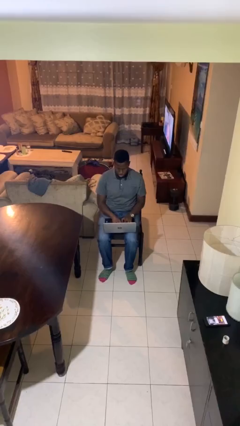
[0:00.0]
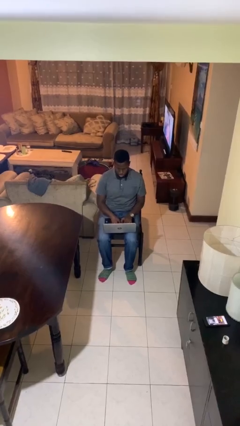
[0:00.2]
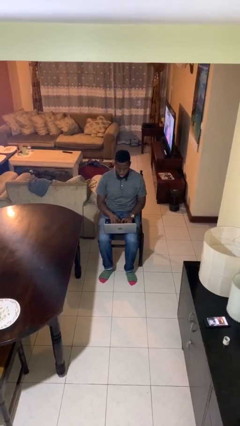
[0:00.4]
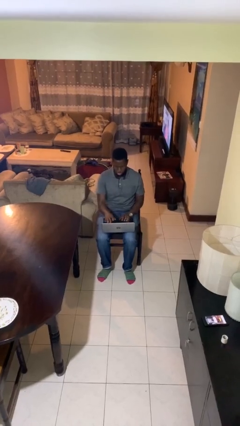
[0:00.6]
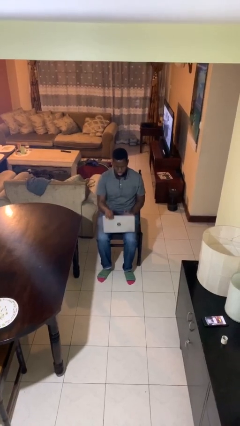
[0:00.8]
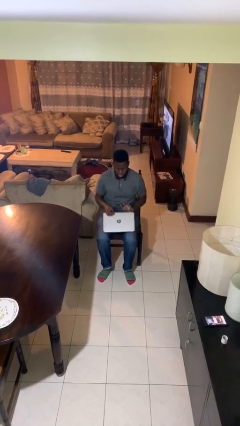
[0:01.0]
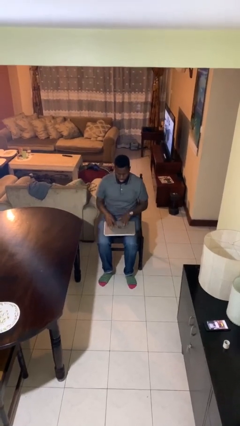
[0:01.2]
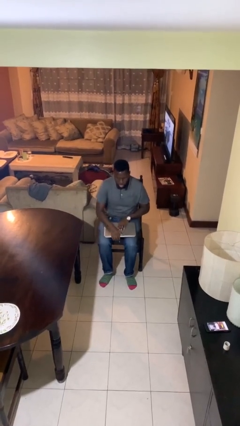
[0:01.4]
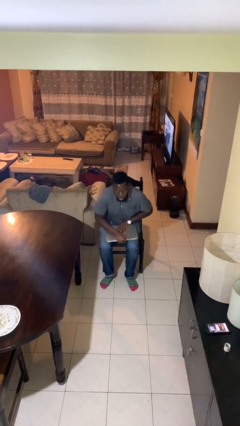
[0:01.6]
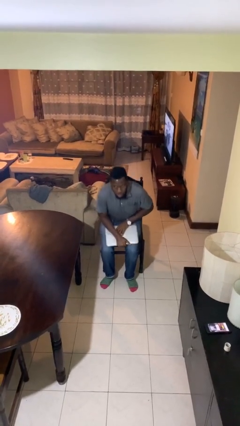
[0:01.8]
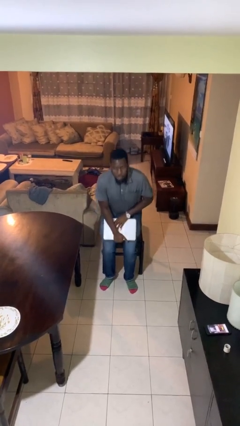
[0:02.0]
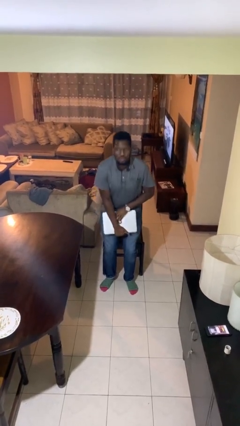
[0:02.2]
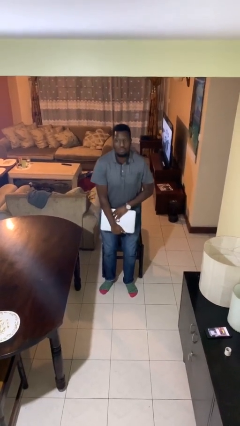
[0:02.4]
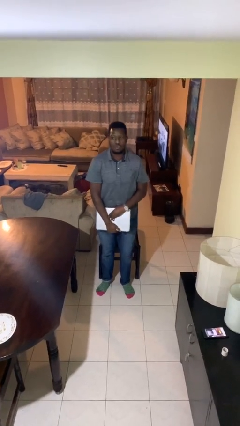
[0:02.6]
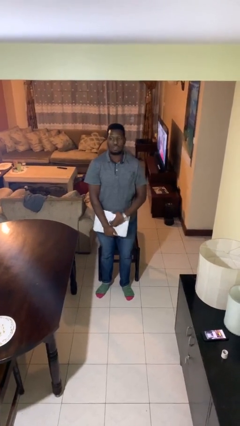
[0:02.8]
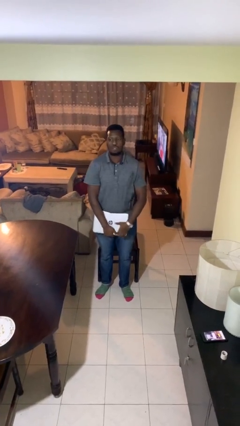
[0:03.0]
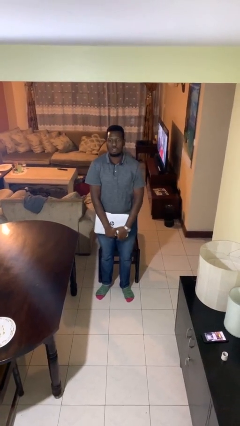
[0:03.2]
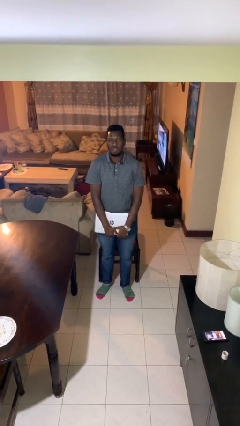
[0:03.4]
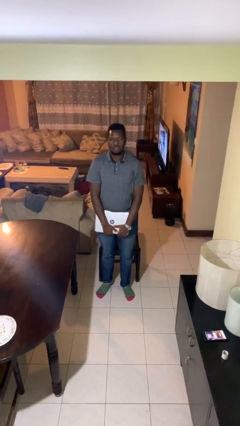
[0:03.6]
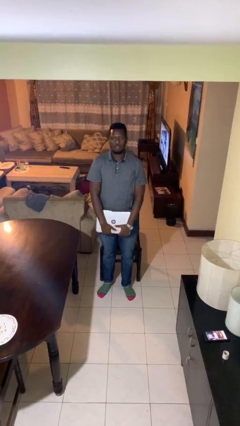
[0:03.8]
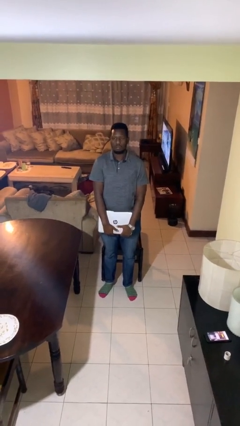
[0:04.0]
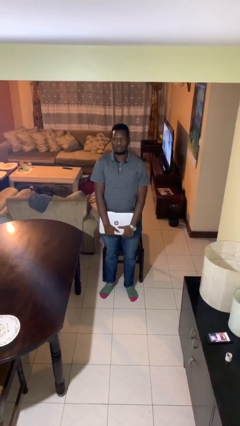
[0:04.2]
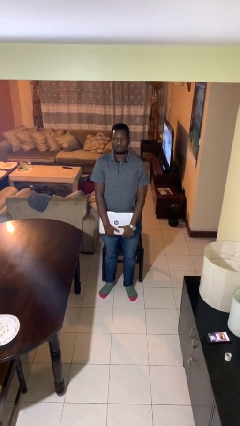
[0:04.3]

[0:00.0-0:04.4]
person stands up

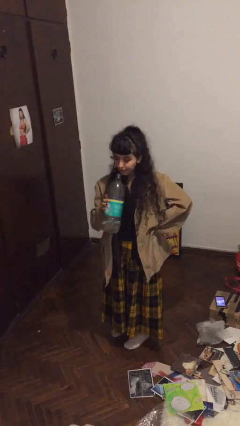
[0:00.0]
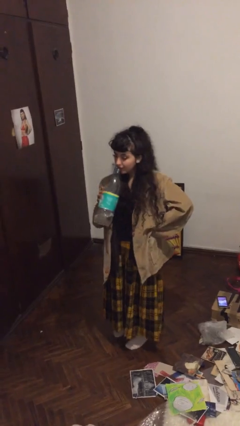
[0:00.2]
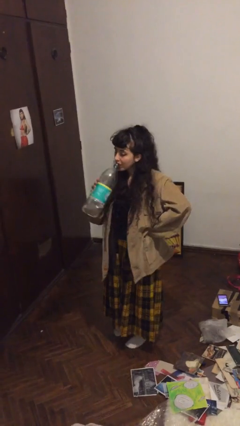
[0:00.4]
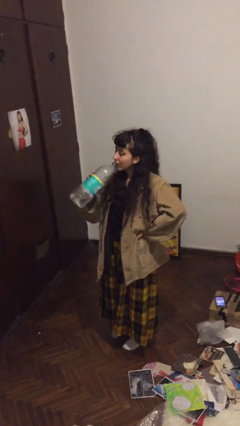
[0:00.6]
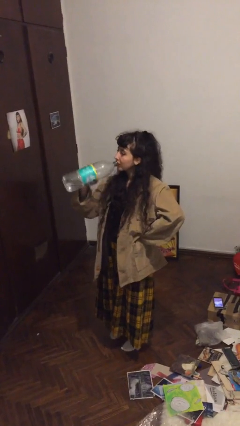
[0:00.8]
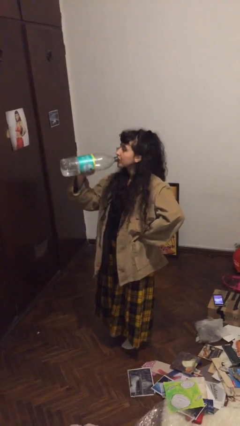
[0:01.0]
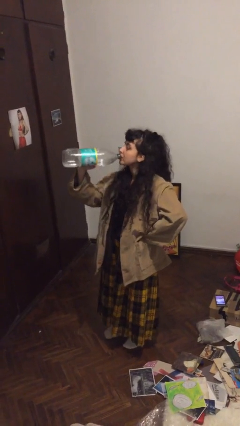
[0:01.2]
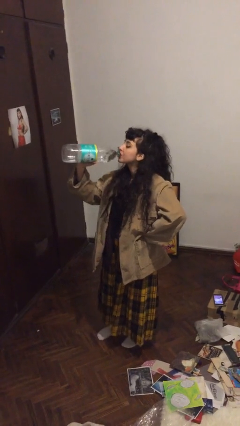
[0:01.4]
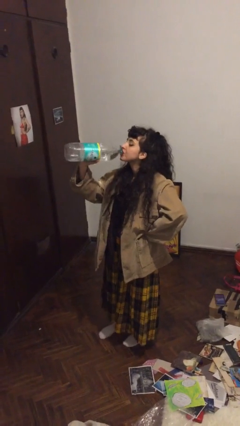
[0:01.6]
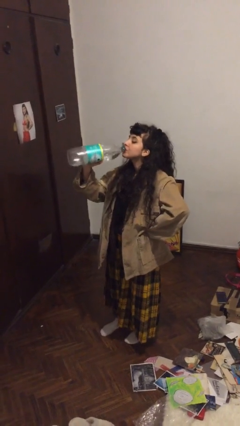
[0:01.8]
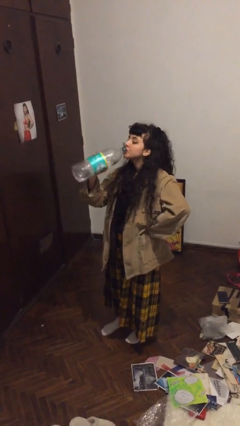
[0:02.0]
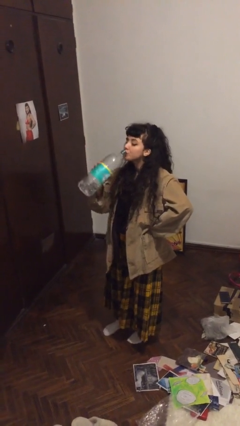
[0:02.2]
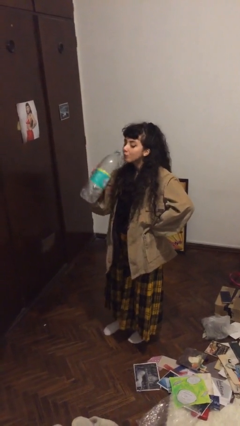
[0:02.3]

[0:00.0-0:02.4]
person drinks from bottle

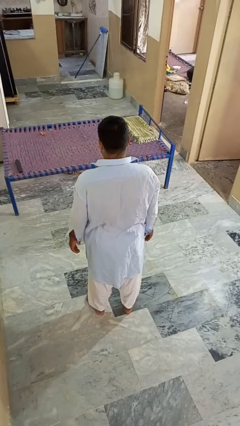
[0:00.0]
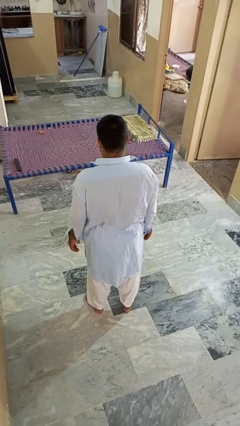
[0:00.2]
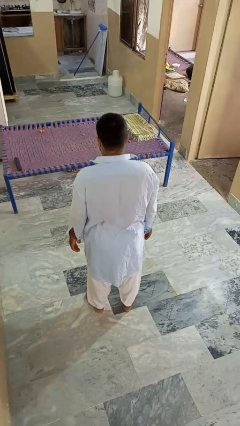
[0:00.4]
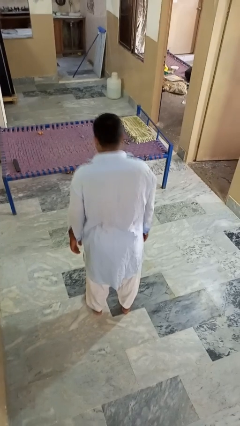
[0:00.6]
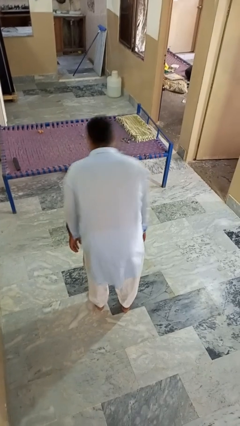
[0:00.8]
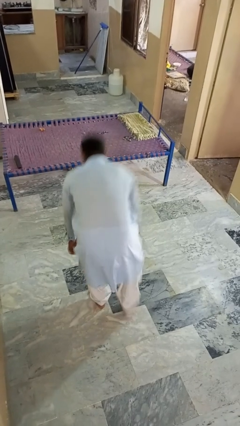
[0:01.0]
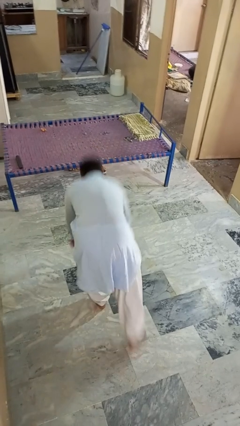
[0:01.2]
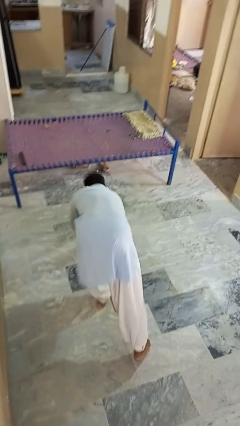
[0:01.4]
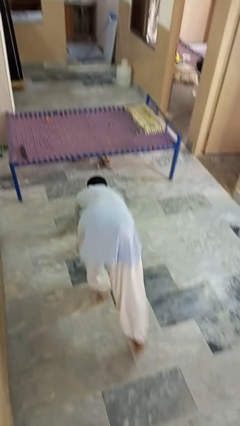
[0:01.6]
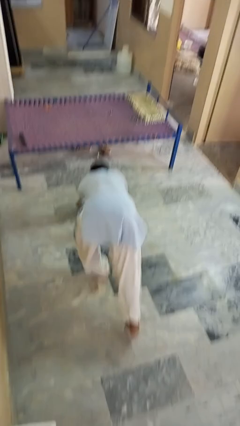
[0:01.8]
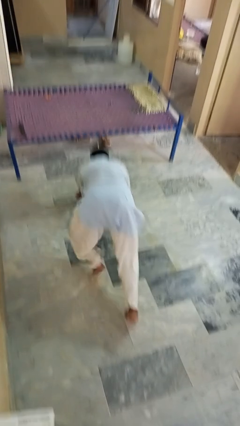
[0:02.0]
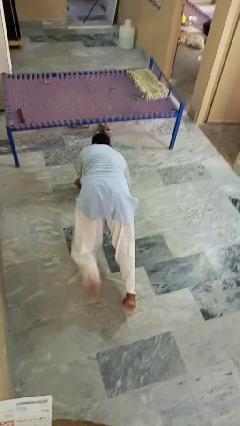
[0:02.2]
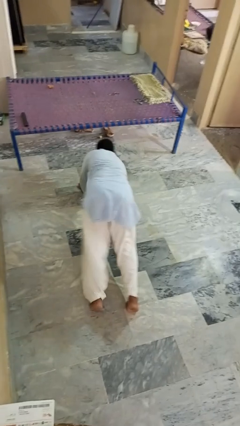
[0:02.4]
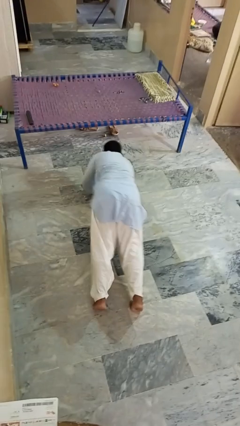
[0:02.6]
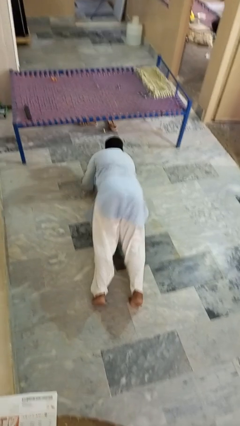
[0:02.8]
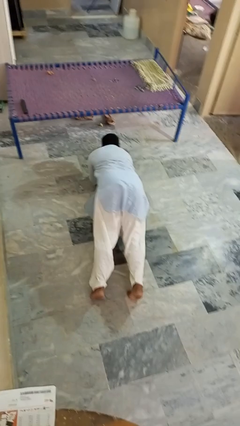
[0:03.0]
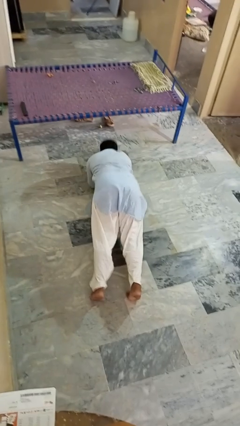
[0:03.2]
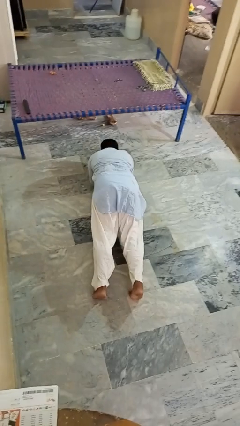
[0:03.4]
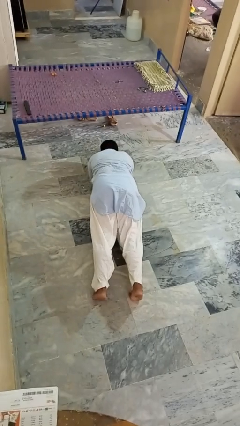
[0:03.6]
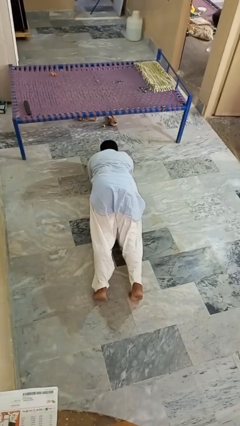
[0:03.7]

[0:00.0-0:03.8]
person exercises with plank

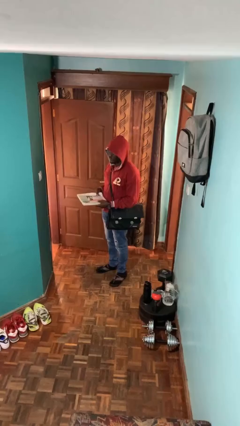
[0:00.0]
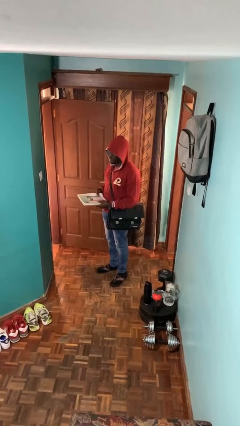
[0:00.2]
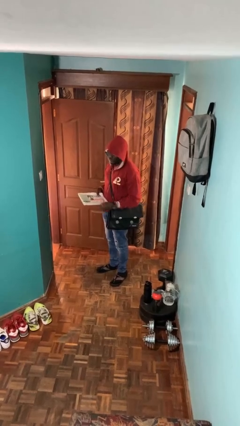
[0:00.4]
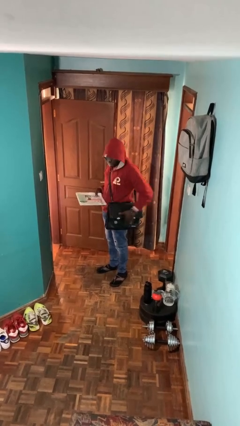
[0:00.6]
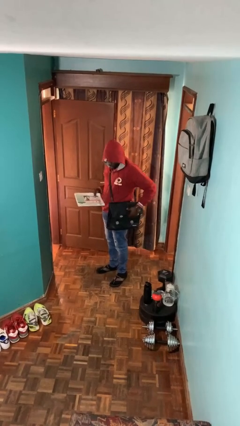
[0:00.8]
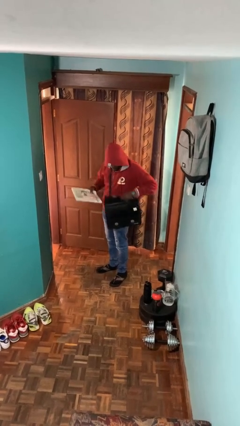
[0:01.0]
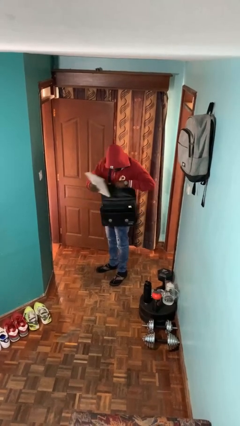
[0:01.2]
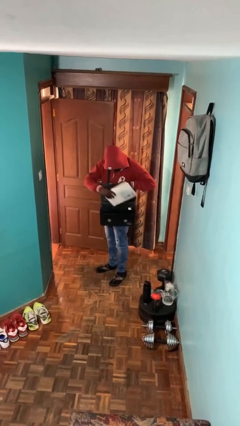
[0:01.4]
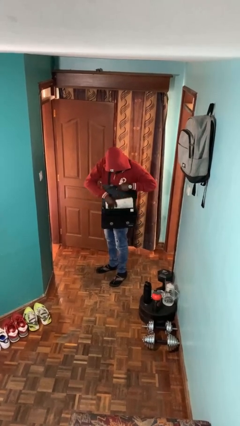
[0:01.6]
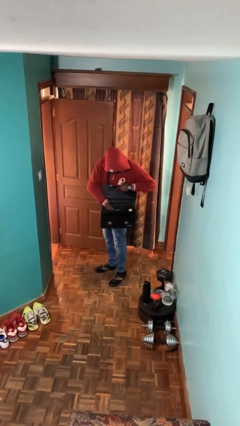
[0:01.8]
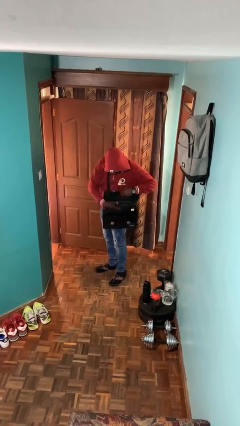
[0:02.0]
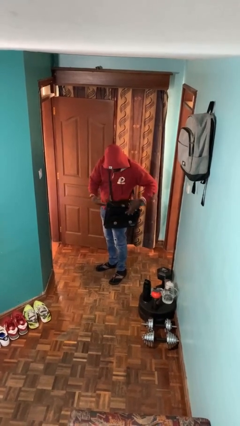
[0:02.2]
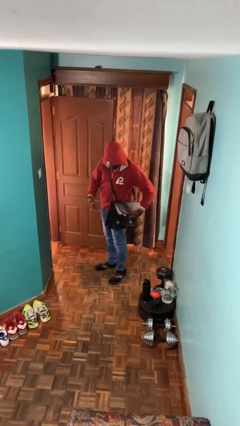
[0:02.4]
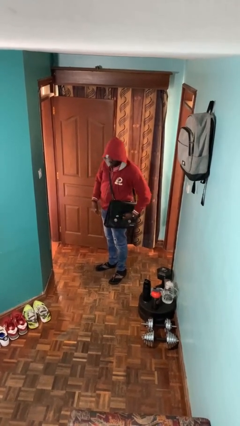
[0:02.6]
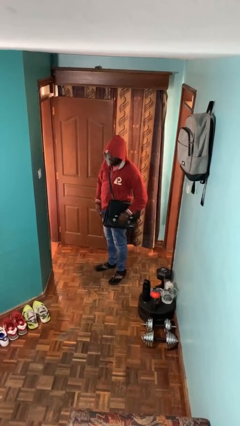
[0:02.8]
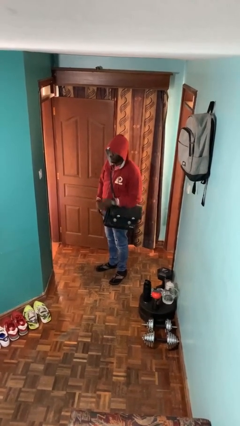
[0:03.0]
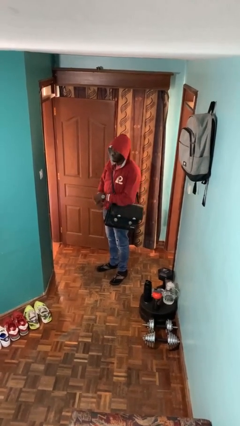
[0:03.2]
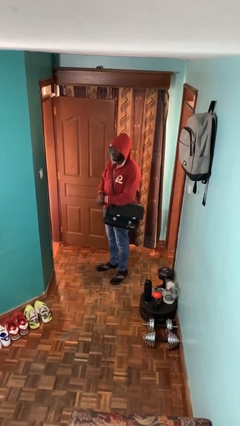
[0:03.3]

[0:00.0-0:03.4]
person puts object into purse

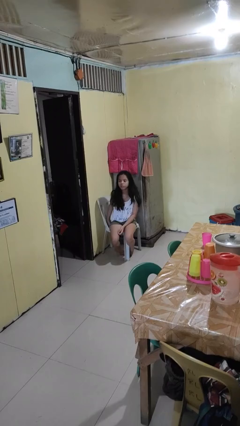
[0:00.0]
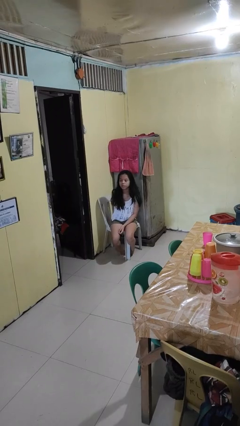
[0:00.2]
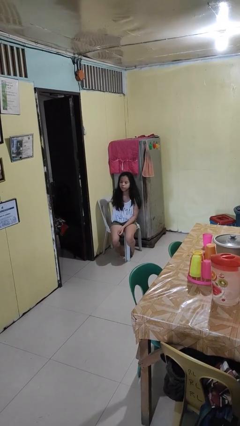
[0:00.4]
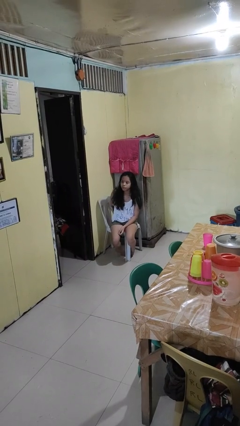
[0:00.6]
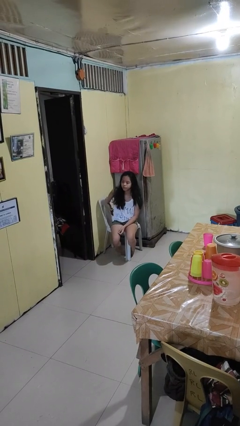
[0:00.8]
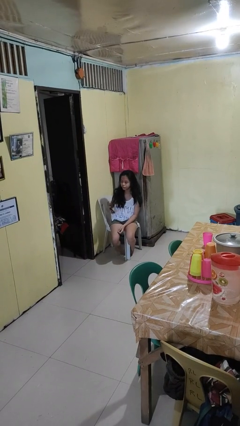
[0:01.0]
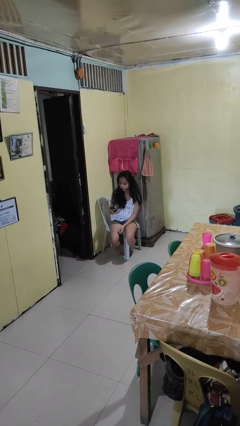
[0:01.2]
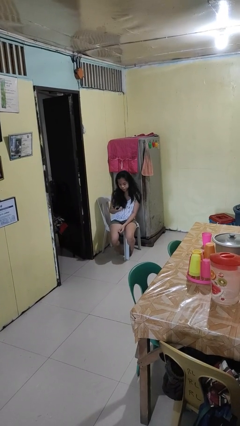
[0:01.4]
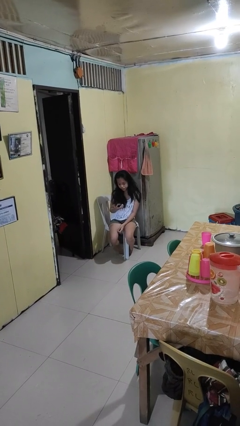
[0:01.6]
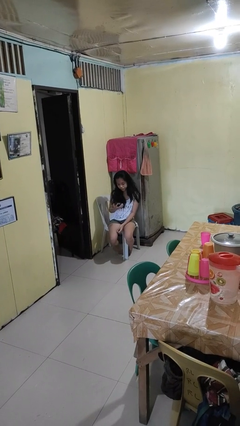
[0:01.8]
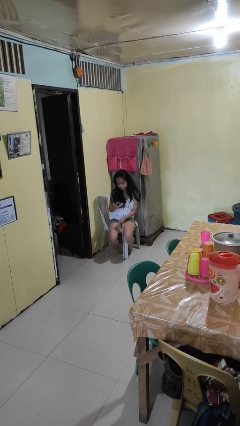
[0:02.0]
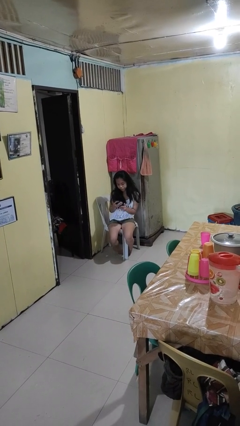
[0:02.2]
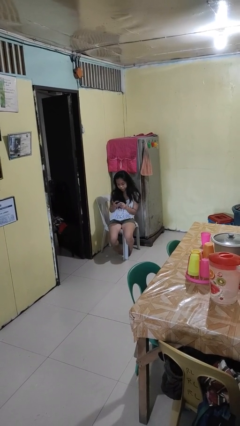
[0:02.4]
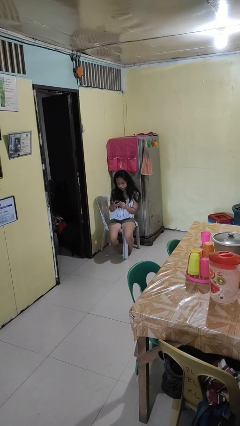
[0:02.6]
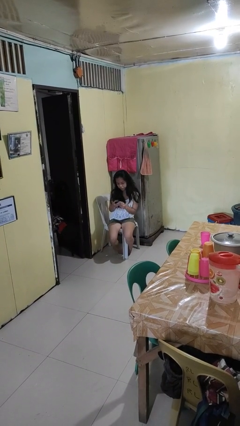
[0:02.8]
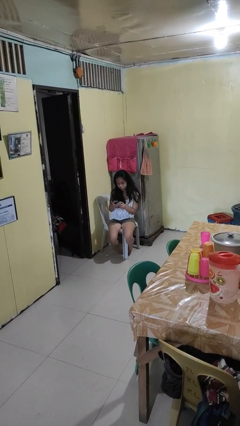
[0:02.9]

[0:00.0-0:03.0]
person takes phone from pocket

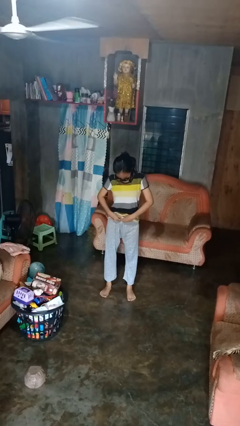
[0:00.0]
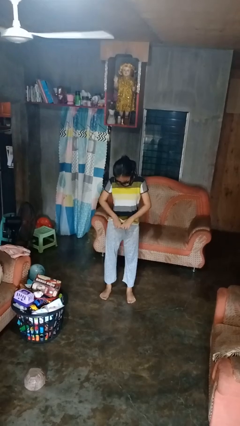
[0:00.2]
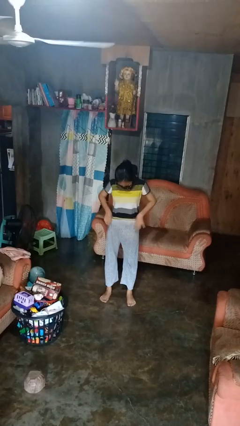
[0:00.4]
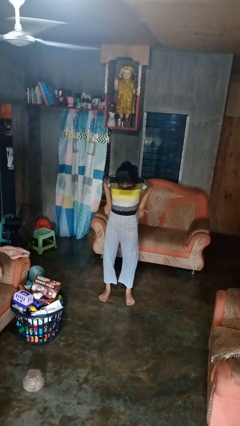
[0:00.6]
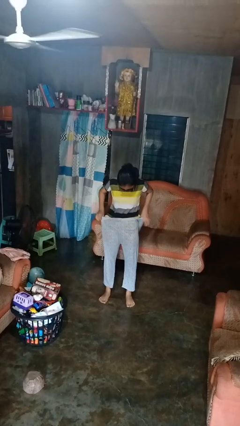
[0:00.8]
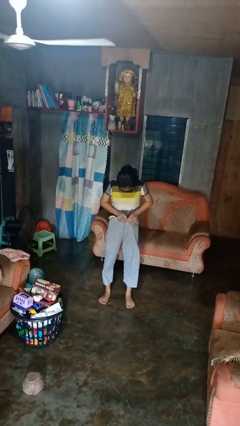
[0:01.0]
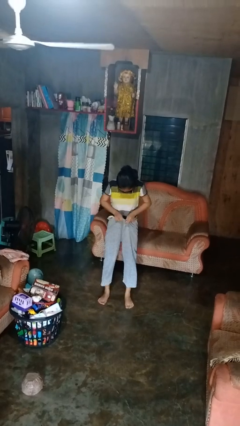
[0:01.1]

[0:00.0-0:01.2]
person tucks in shirt
